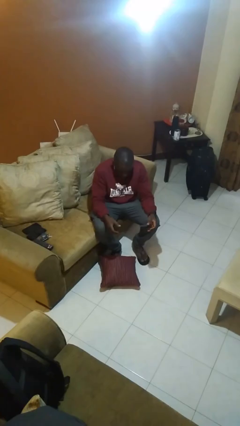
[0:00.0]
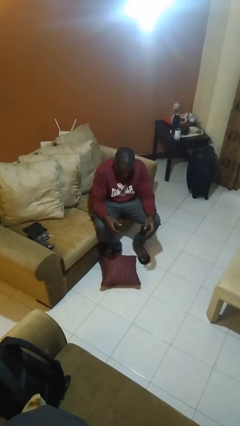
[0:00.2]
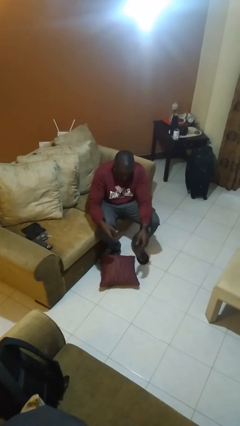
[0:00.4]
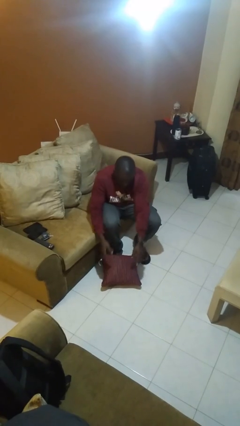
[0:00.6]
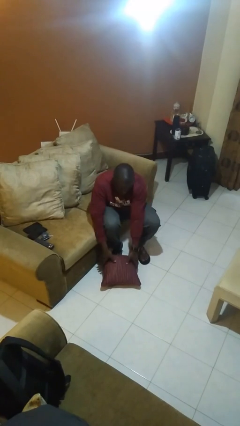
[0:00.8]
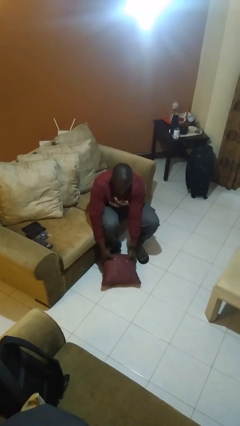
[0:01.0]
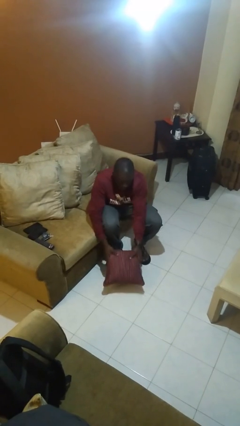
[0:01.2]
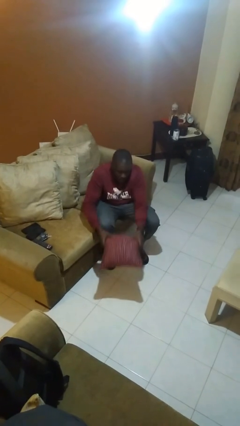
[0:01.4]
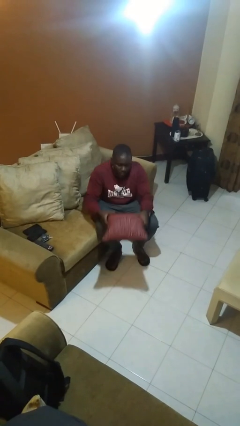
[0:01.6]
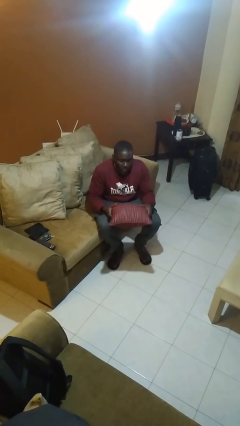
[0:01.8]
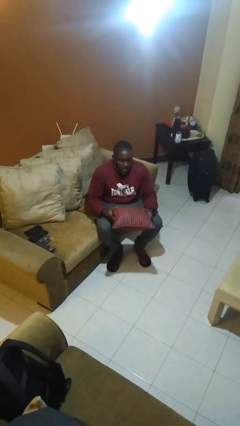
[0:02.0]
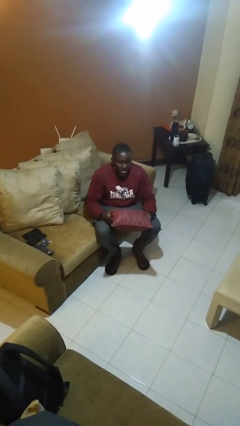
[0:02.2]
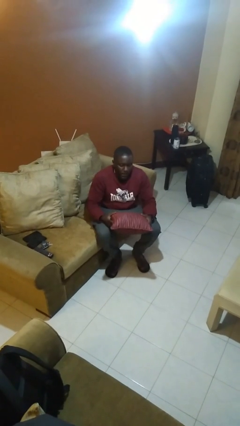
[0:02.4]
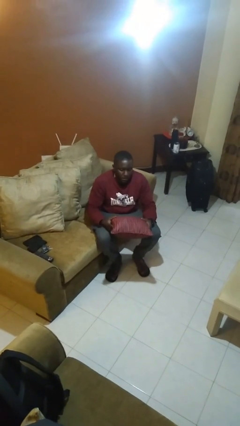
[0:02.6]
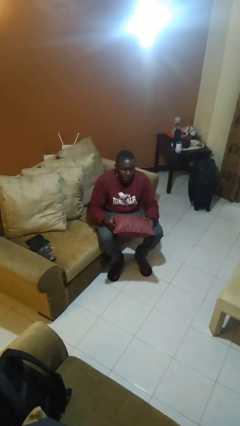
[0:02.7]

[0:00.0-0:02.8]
person picks up object from floor

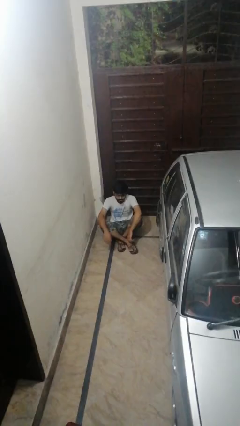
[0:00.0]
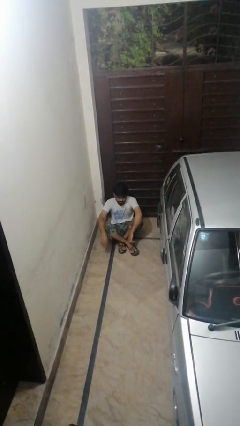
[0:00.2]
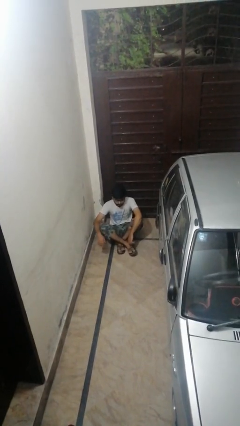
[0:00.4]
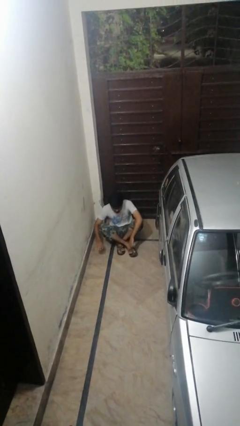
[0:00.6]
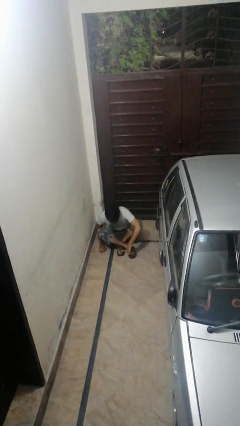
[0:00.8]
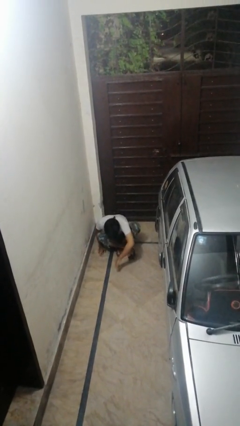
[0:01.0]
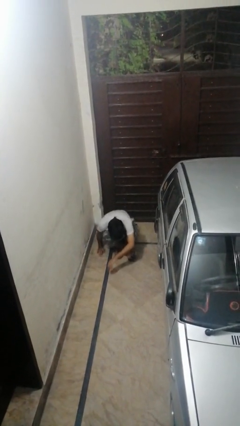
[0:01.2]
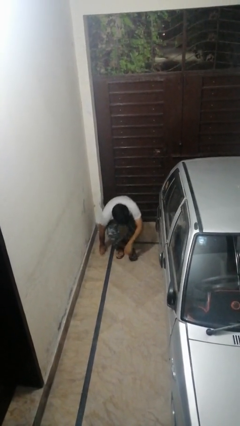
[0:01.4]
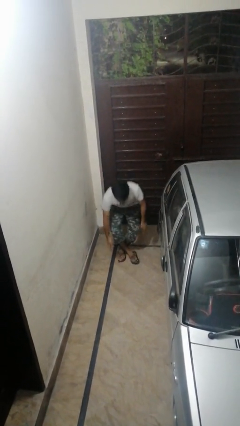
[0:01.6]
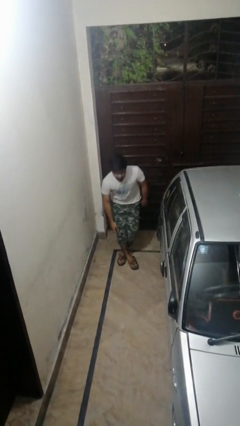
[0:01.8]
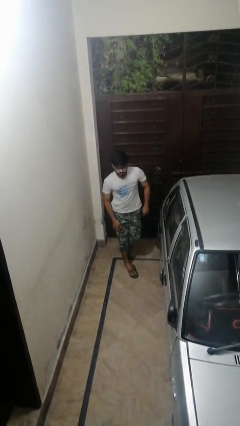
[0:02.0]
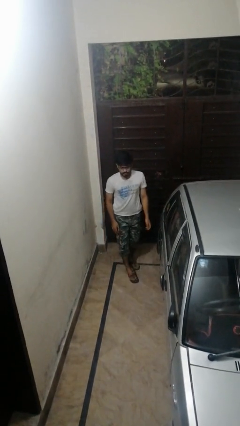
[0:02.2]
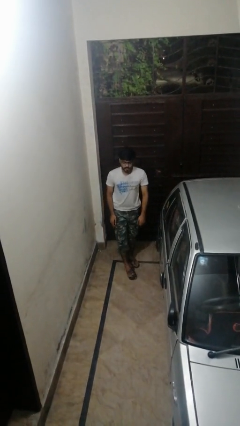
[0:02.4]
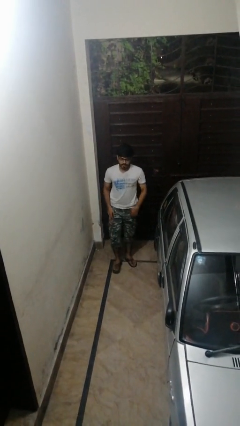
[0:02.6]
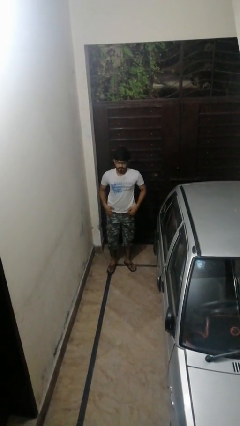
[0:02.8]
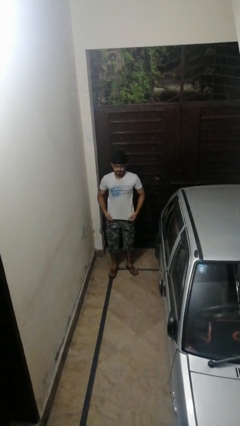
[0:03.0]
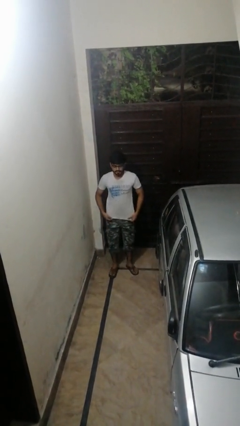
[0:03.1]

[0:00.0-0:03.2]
person stands up from floor

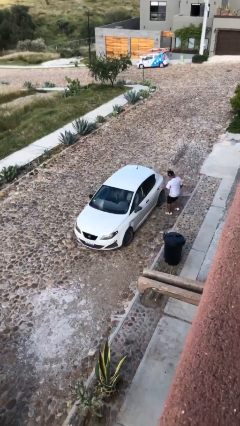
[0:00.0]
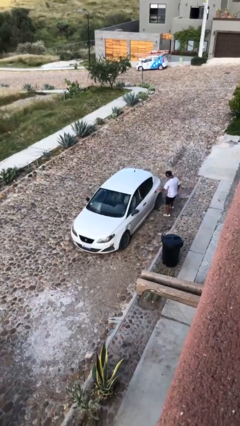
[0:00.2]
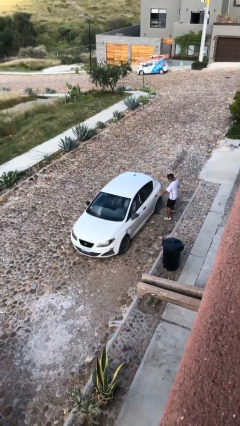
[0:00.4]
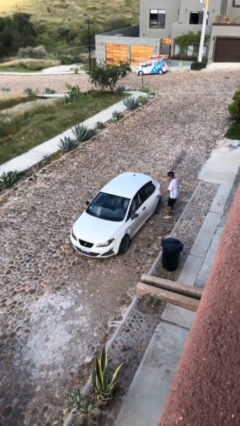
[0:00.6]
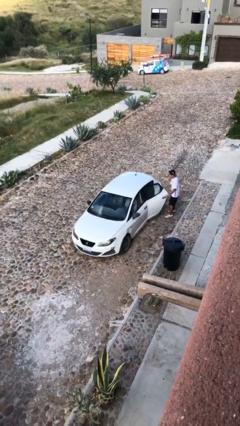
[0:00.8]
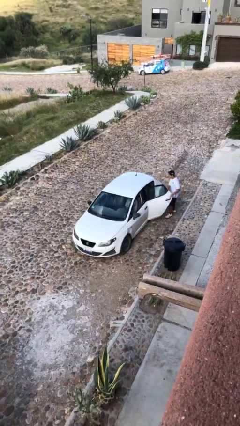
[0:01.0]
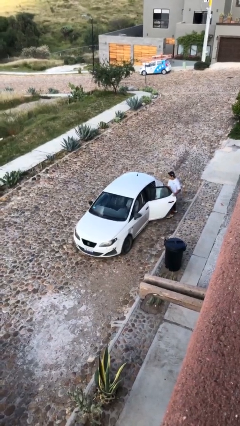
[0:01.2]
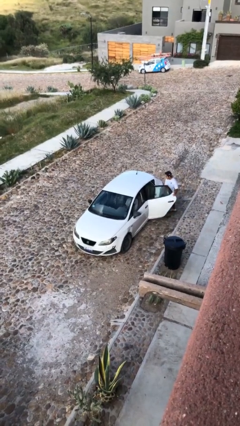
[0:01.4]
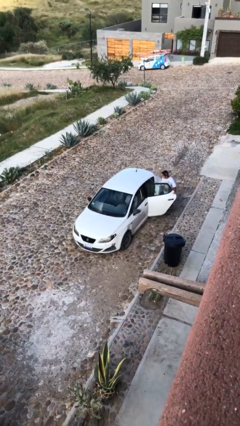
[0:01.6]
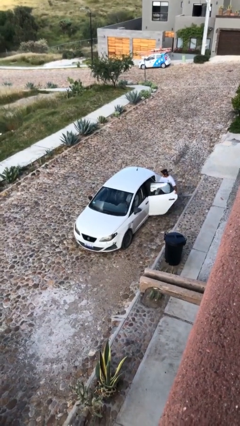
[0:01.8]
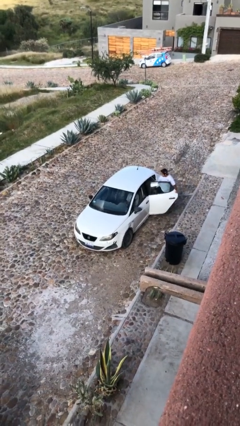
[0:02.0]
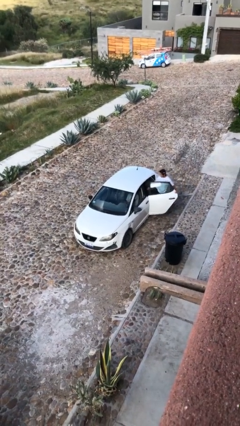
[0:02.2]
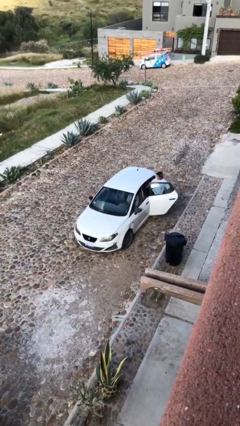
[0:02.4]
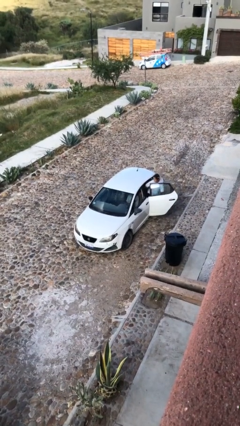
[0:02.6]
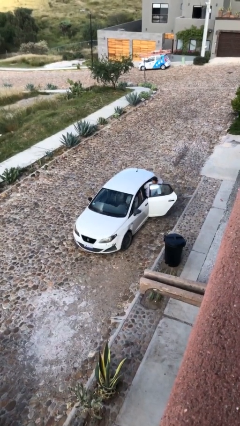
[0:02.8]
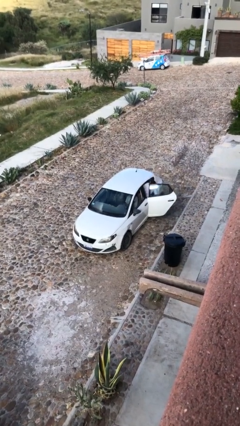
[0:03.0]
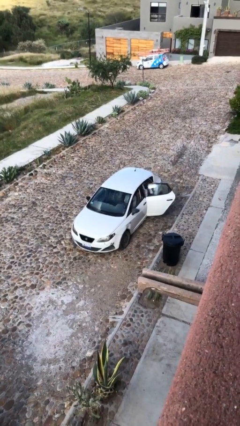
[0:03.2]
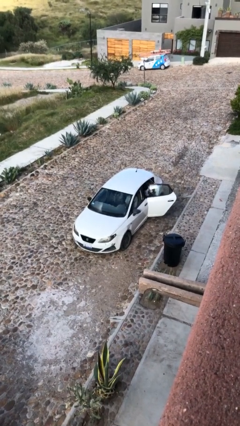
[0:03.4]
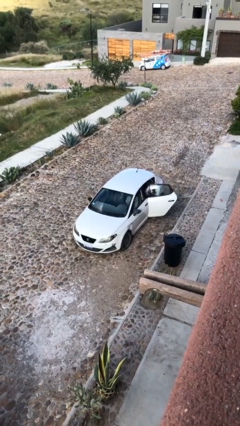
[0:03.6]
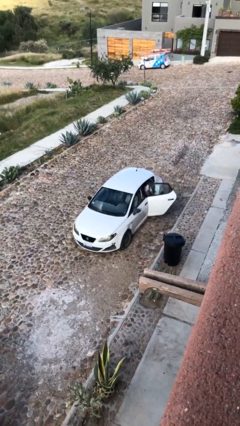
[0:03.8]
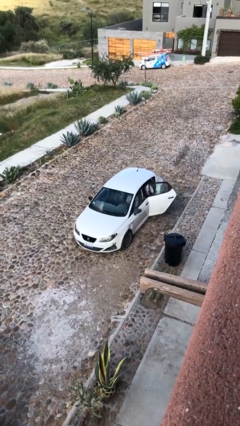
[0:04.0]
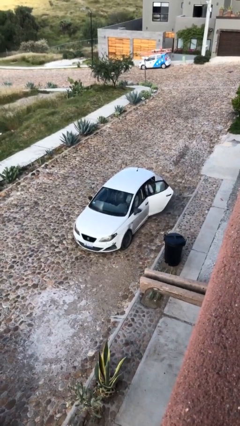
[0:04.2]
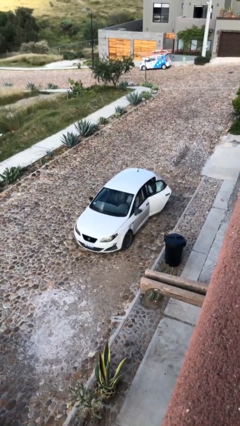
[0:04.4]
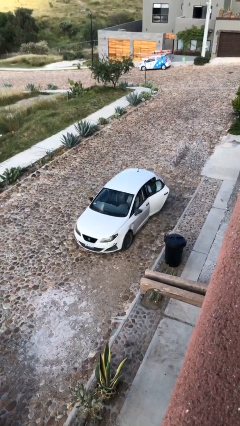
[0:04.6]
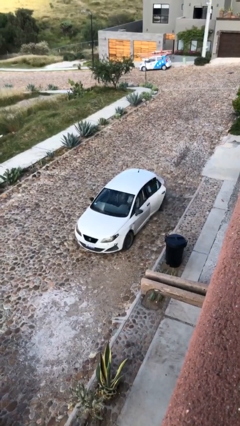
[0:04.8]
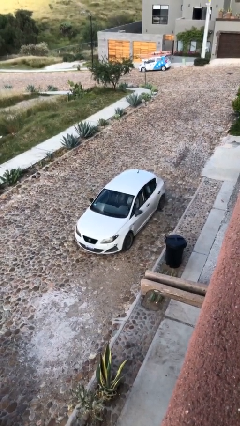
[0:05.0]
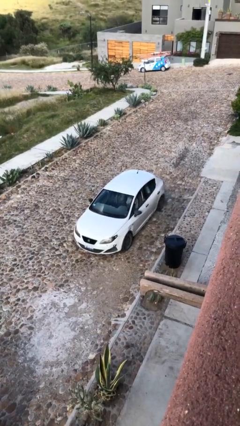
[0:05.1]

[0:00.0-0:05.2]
car picks up person

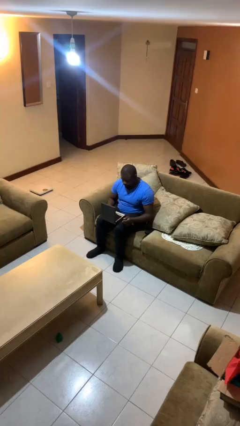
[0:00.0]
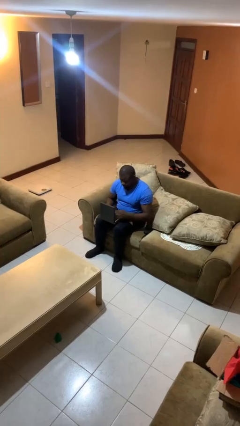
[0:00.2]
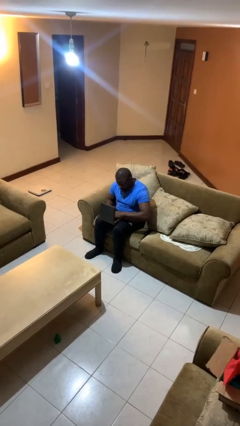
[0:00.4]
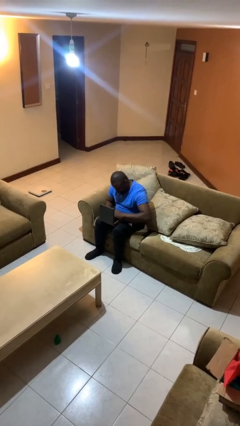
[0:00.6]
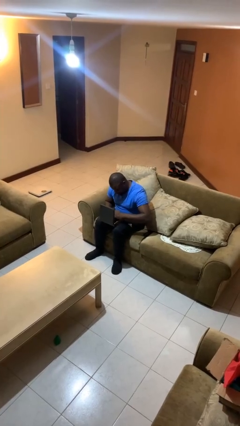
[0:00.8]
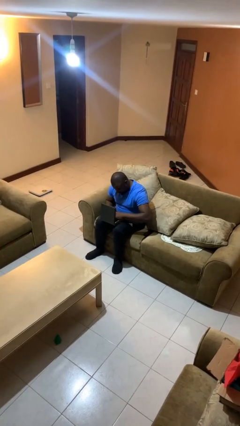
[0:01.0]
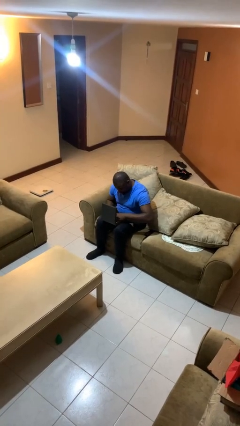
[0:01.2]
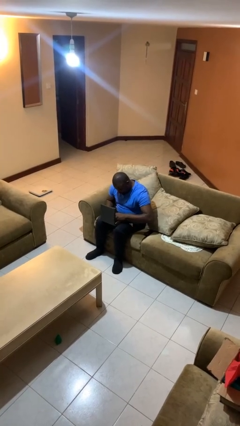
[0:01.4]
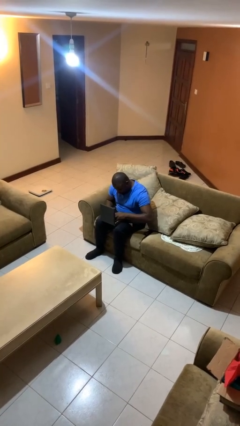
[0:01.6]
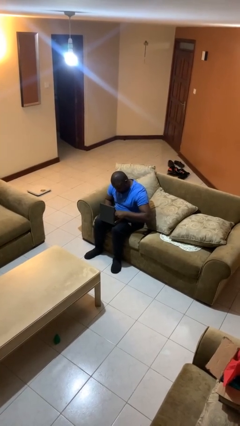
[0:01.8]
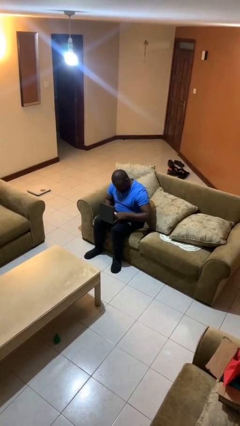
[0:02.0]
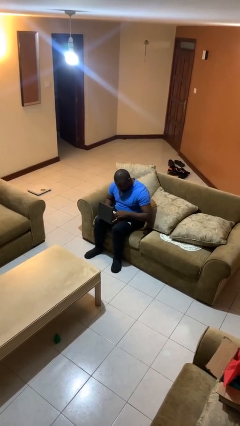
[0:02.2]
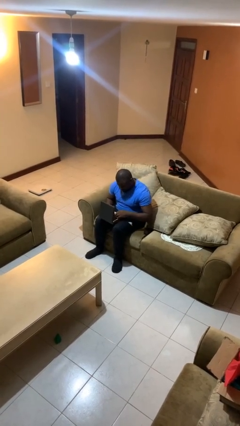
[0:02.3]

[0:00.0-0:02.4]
person searches jewelry box

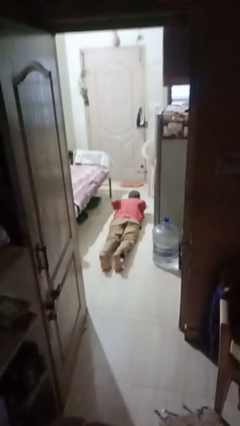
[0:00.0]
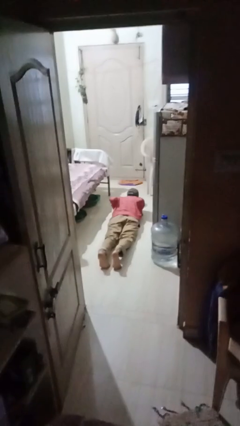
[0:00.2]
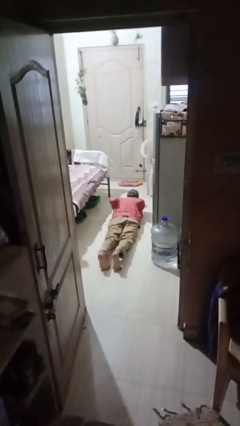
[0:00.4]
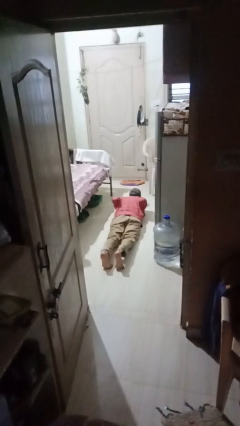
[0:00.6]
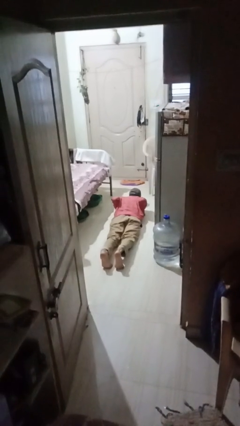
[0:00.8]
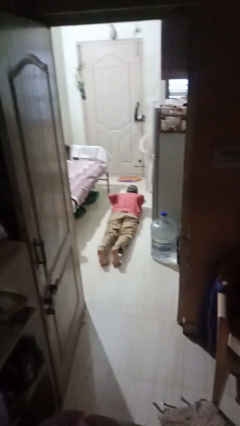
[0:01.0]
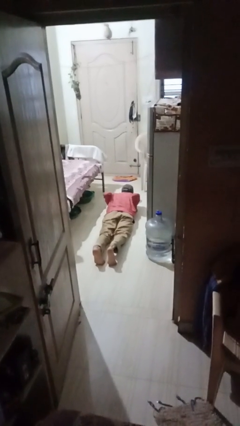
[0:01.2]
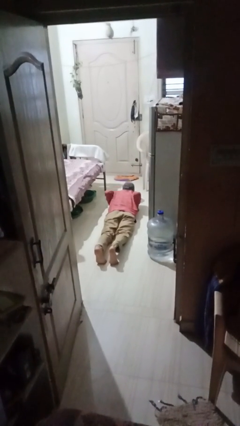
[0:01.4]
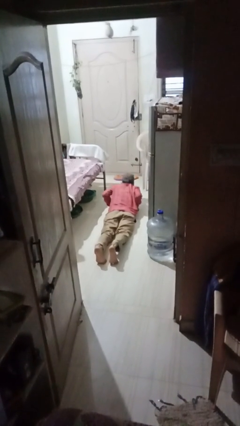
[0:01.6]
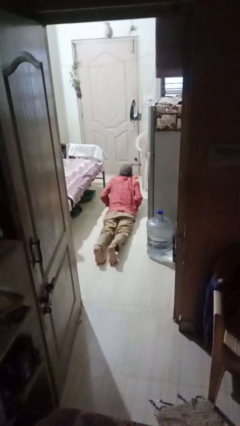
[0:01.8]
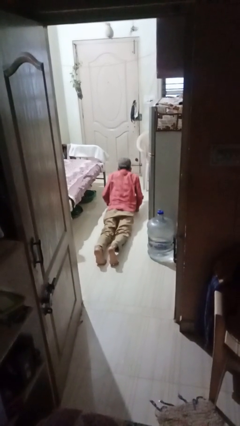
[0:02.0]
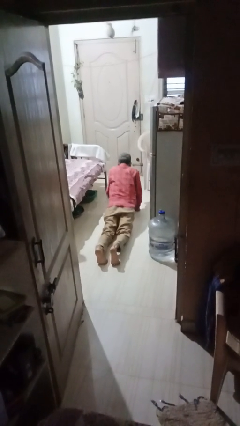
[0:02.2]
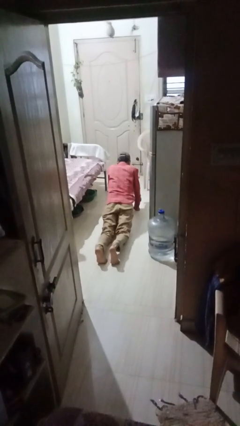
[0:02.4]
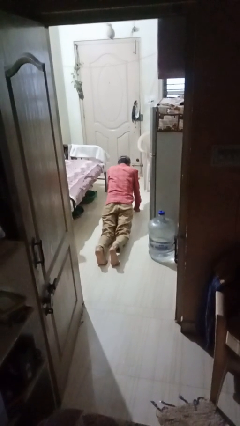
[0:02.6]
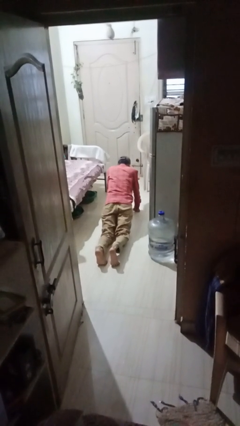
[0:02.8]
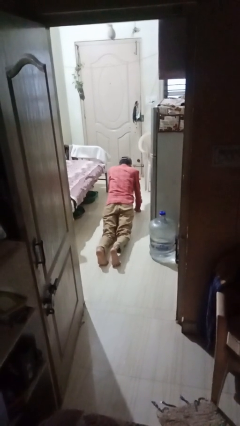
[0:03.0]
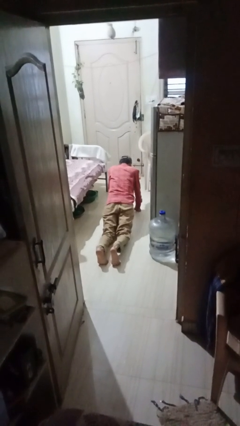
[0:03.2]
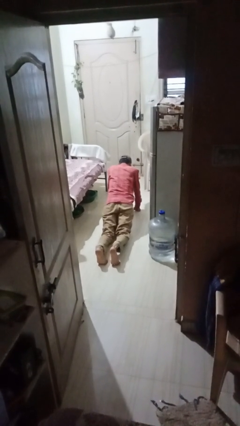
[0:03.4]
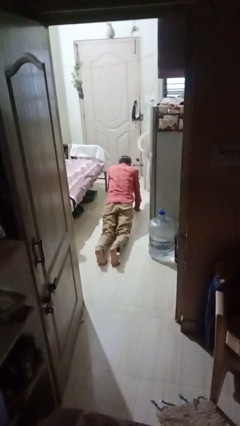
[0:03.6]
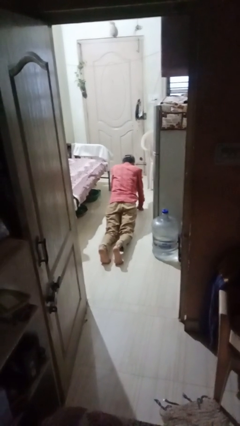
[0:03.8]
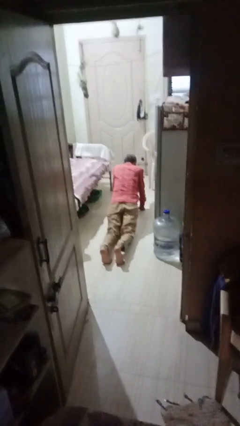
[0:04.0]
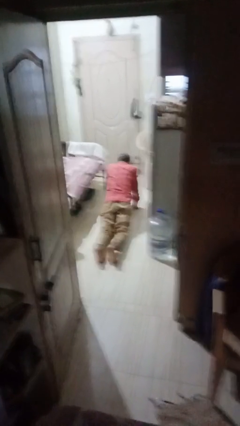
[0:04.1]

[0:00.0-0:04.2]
person exercises with pushup
